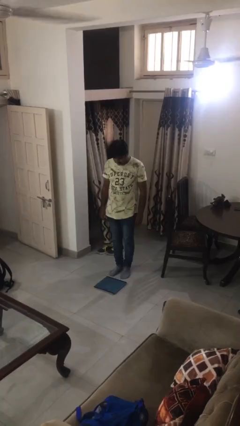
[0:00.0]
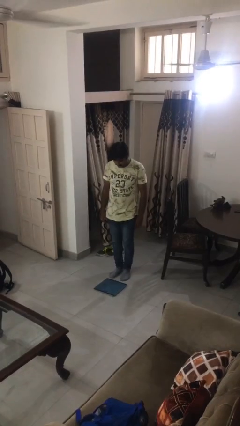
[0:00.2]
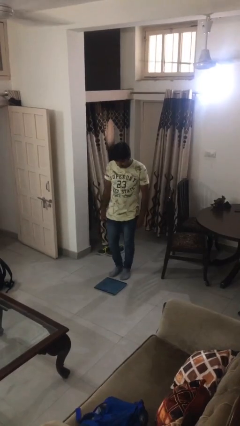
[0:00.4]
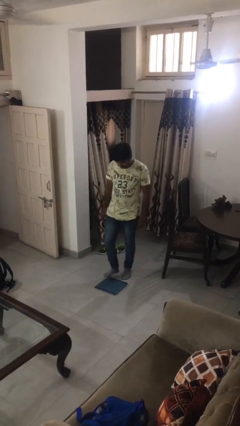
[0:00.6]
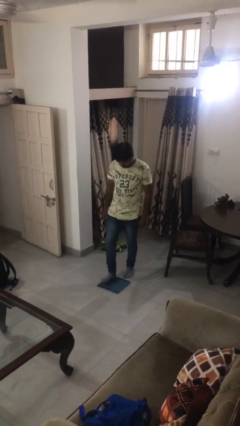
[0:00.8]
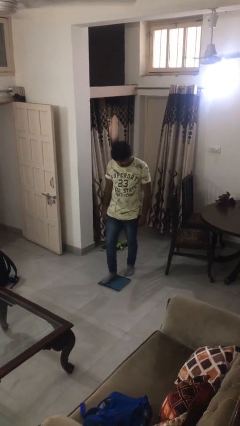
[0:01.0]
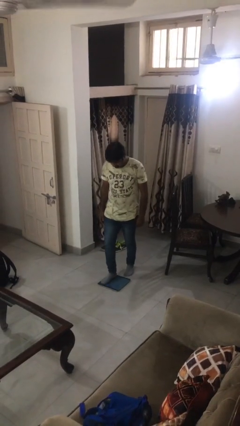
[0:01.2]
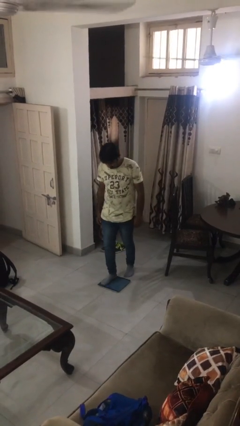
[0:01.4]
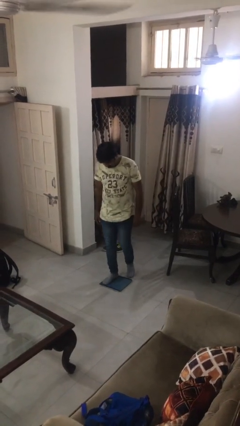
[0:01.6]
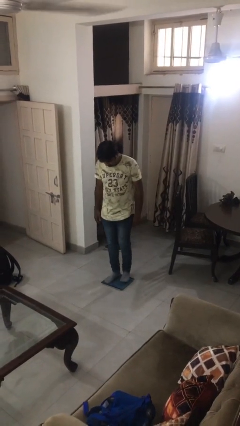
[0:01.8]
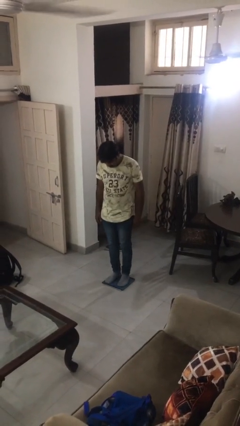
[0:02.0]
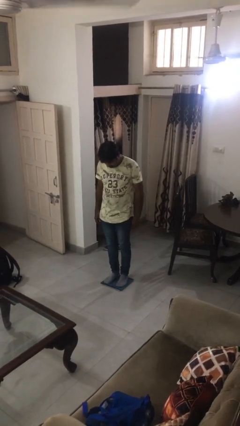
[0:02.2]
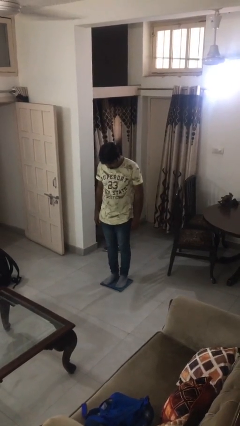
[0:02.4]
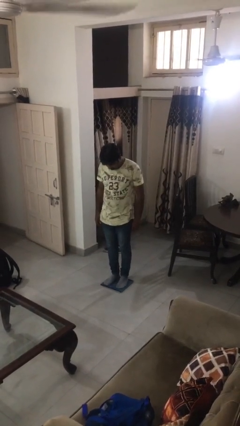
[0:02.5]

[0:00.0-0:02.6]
person uses bodyweight scale

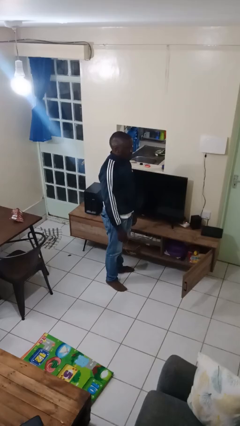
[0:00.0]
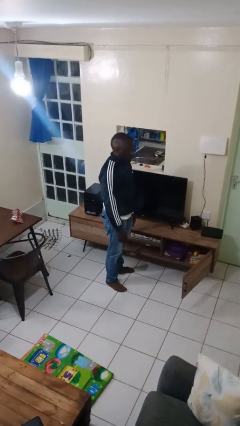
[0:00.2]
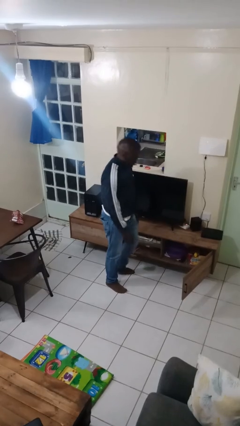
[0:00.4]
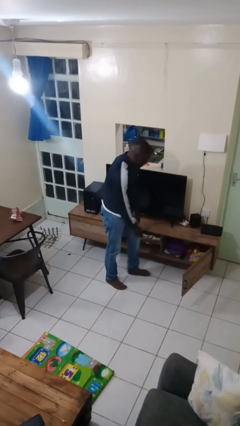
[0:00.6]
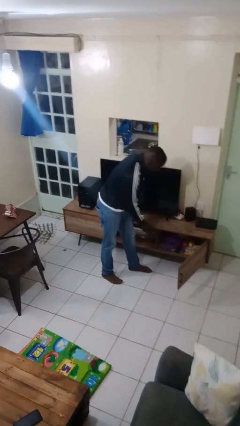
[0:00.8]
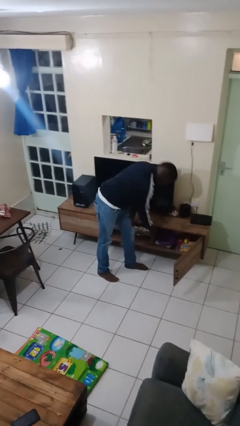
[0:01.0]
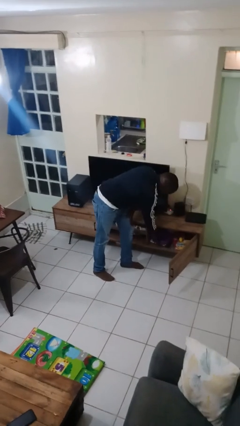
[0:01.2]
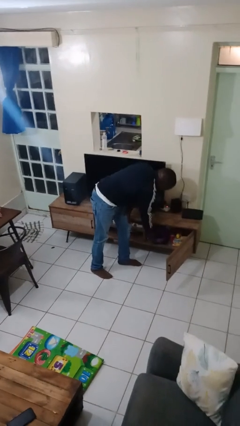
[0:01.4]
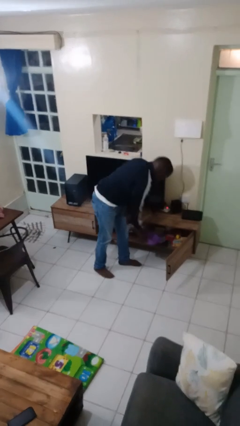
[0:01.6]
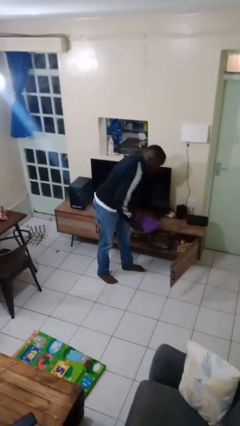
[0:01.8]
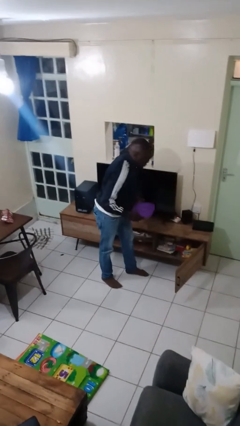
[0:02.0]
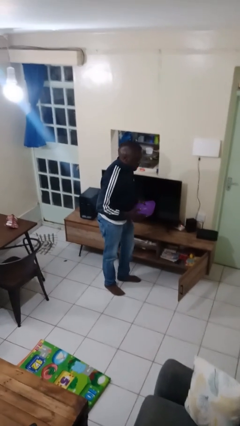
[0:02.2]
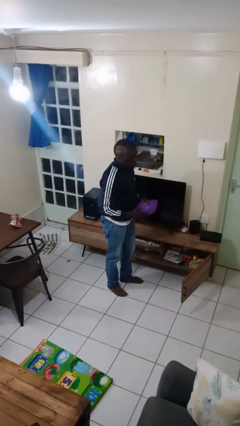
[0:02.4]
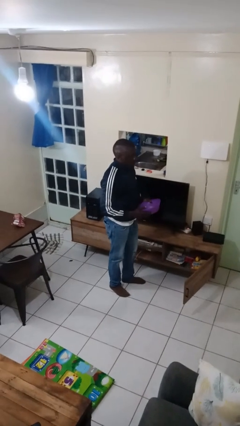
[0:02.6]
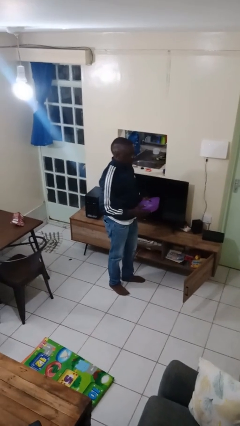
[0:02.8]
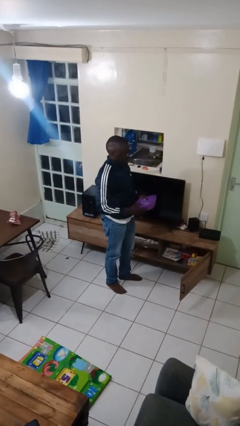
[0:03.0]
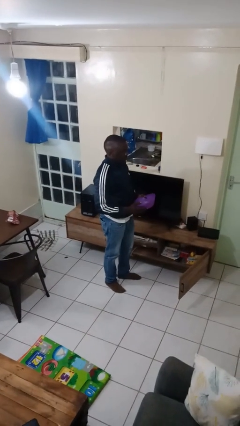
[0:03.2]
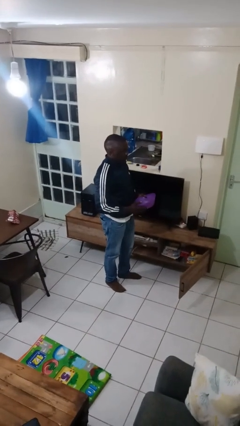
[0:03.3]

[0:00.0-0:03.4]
person picks up object from cabinet

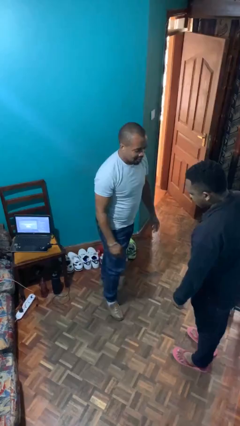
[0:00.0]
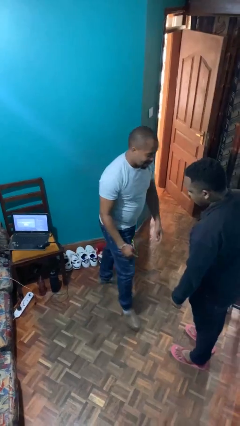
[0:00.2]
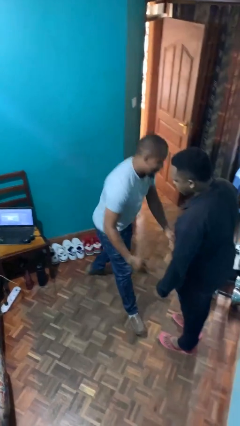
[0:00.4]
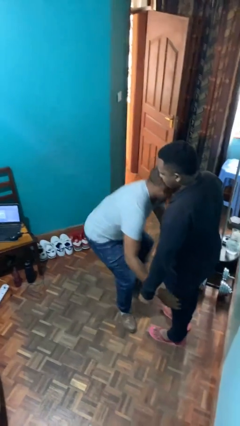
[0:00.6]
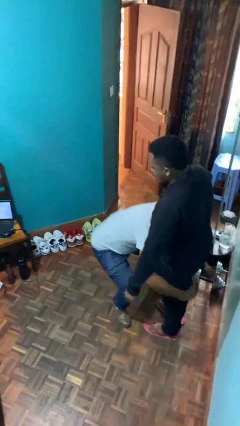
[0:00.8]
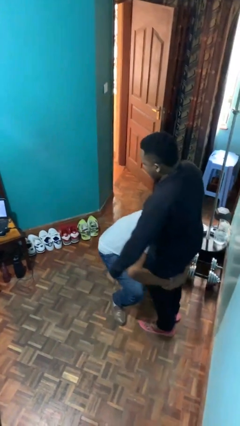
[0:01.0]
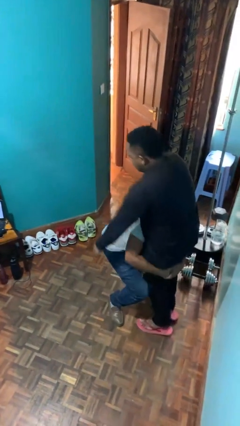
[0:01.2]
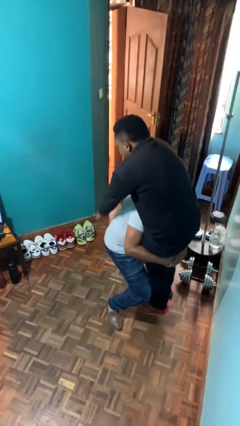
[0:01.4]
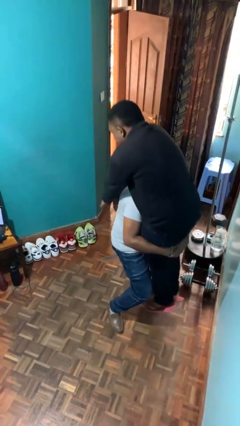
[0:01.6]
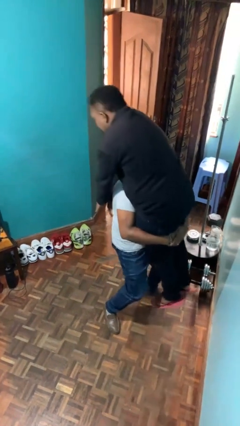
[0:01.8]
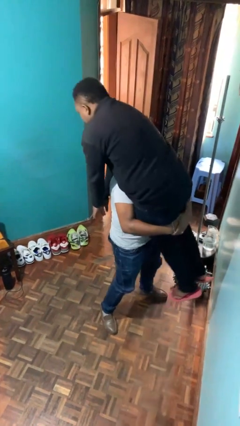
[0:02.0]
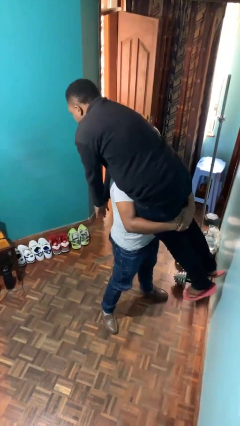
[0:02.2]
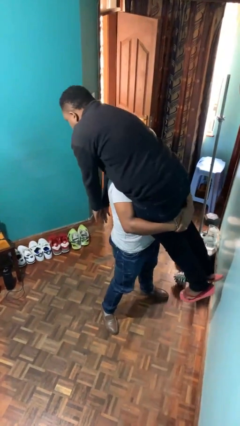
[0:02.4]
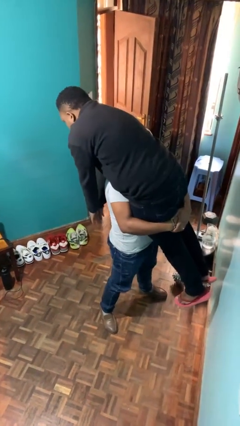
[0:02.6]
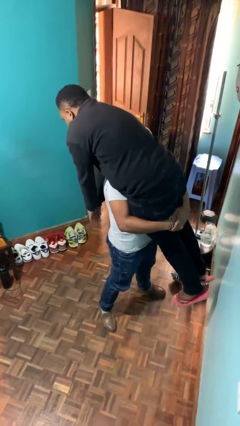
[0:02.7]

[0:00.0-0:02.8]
person carries person over shoulder

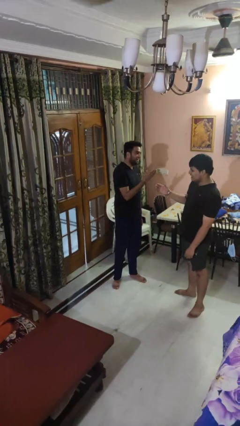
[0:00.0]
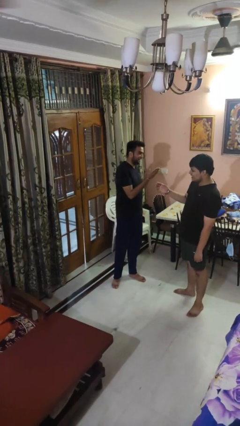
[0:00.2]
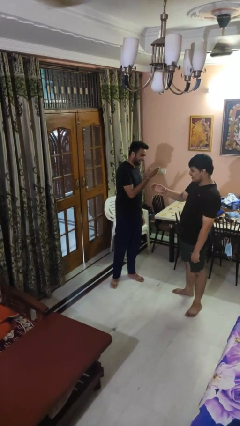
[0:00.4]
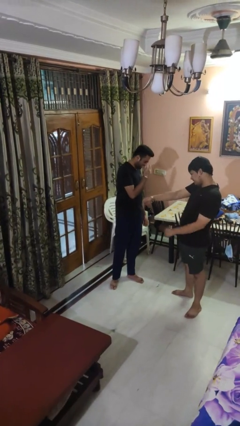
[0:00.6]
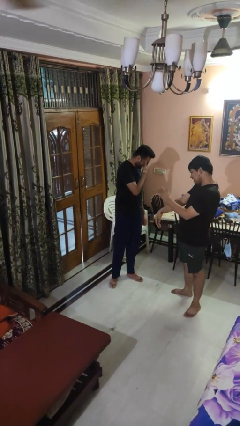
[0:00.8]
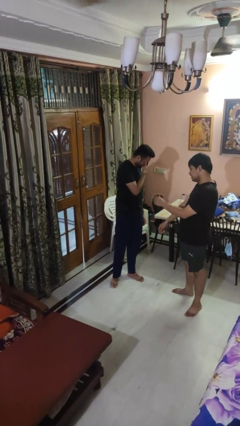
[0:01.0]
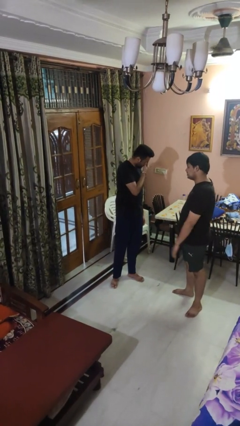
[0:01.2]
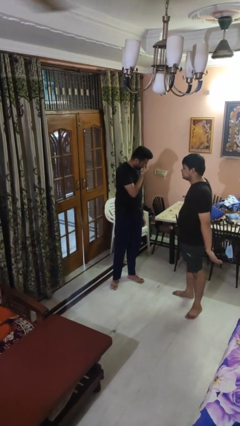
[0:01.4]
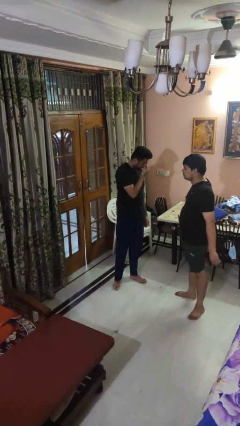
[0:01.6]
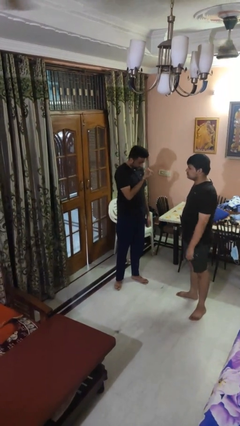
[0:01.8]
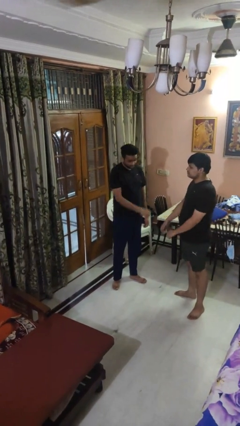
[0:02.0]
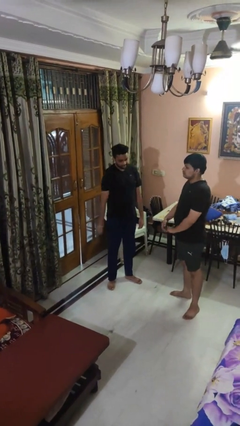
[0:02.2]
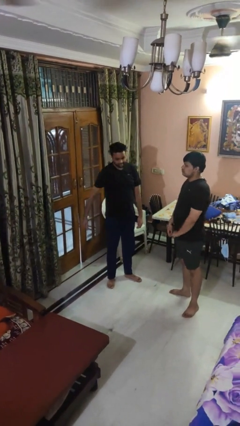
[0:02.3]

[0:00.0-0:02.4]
person laughs with person

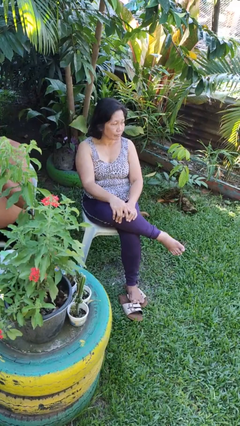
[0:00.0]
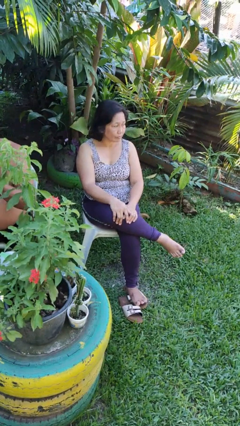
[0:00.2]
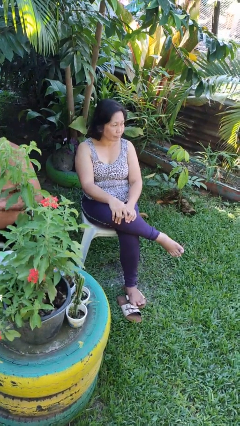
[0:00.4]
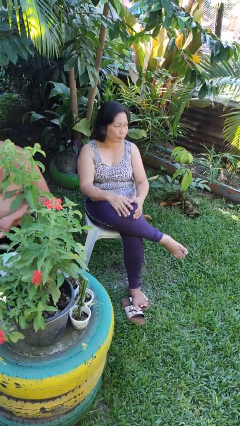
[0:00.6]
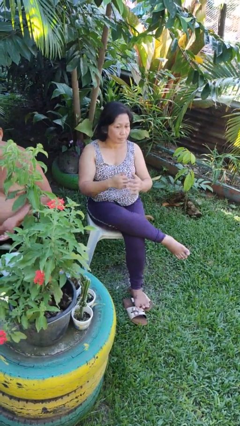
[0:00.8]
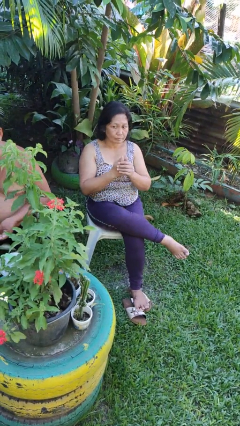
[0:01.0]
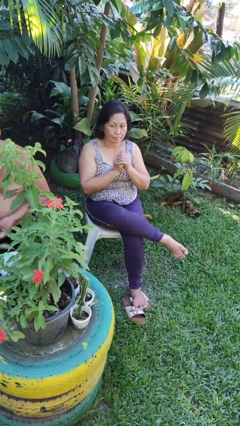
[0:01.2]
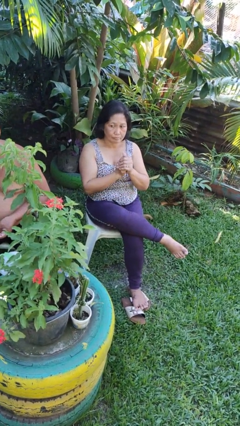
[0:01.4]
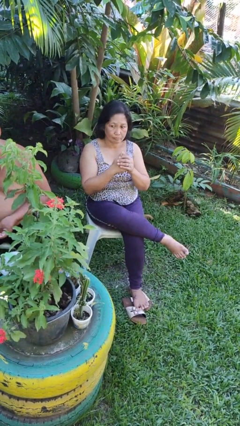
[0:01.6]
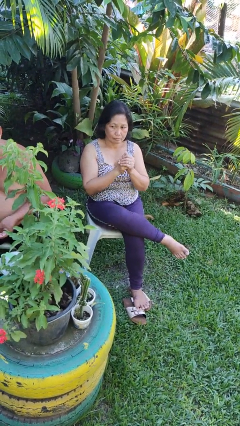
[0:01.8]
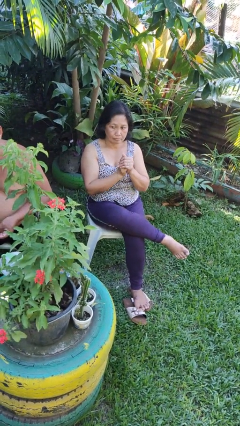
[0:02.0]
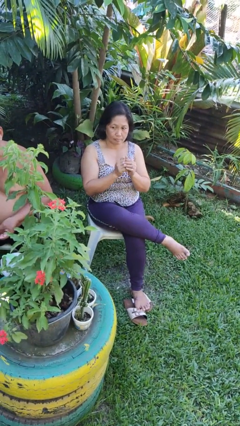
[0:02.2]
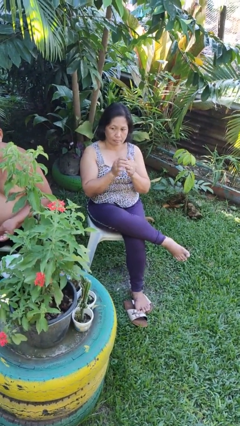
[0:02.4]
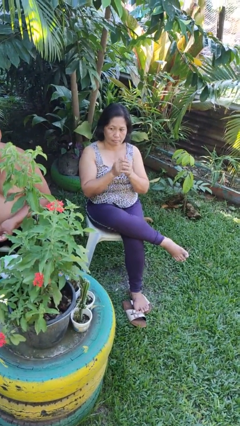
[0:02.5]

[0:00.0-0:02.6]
person cracks knuckles

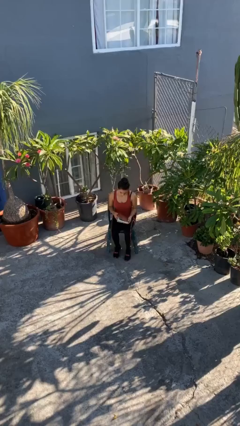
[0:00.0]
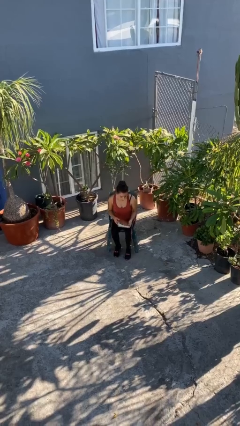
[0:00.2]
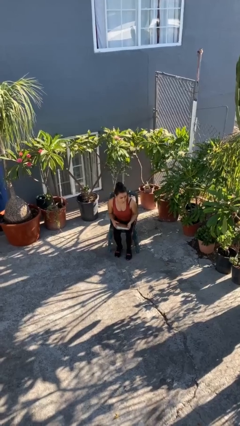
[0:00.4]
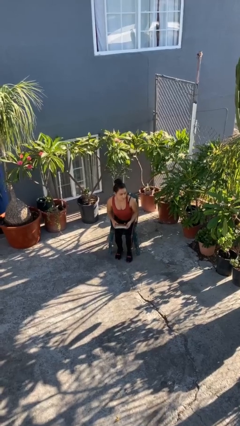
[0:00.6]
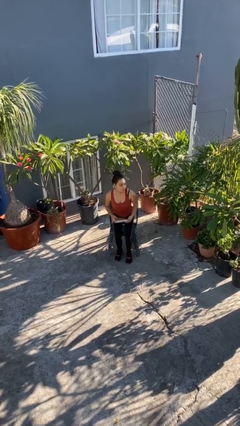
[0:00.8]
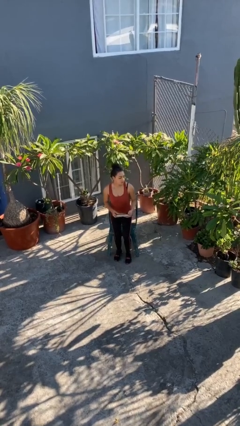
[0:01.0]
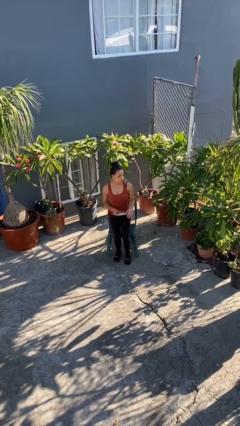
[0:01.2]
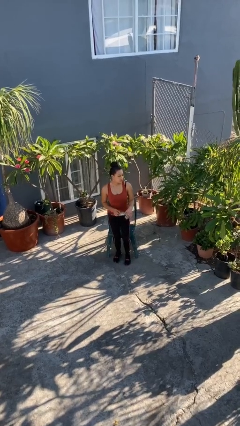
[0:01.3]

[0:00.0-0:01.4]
person stands up

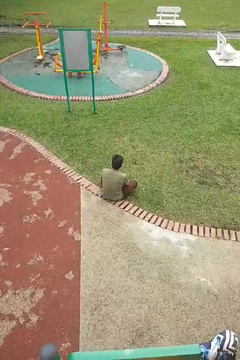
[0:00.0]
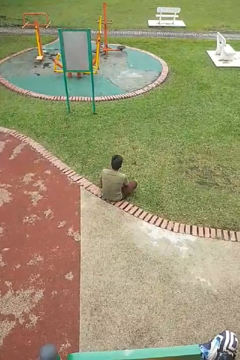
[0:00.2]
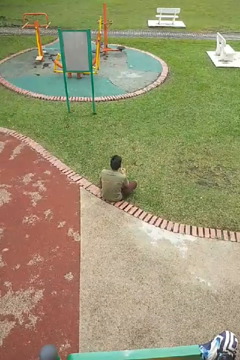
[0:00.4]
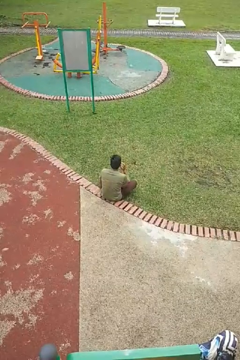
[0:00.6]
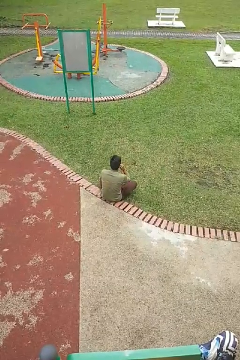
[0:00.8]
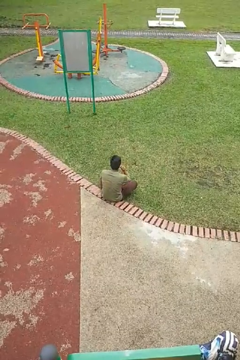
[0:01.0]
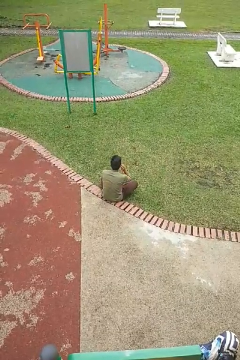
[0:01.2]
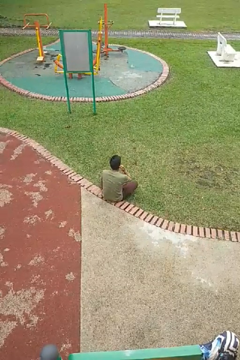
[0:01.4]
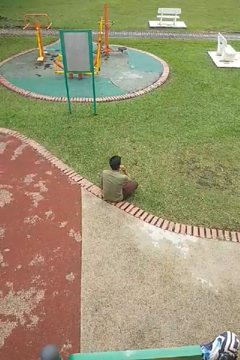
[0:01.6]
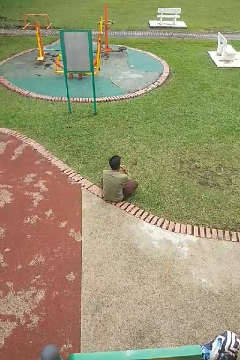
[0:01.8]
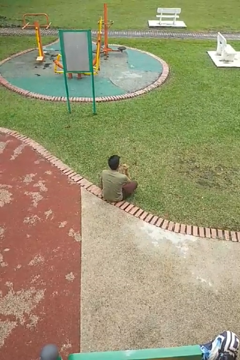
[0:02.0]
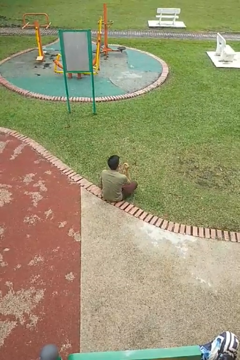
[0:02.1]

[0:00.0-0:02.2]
person touches earlobe
